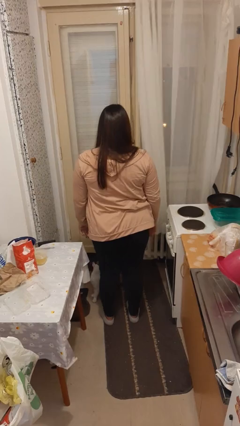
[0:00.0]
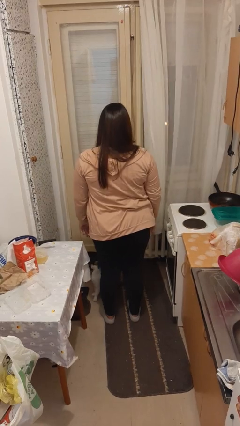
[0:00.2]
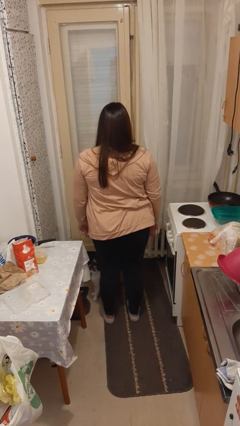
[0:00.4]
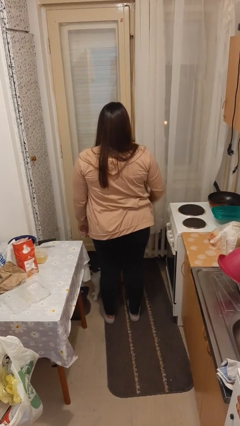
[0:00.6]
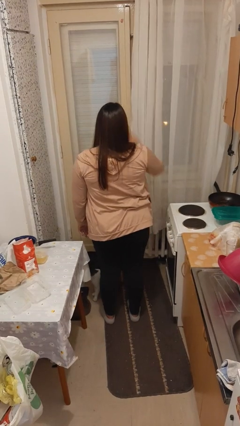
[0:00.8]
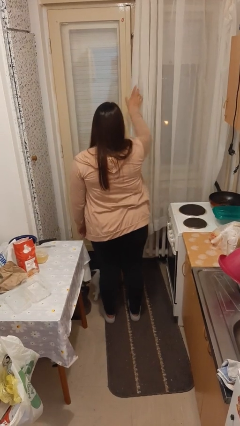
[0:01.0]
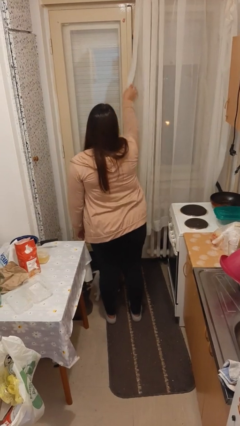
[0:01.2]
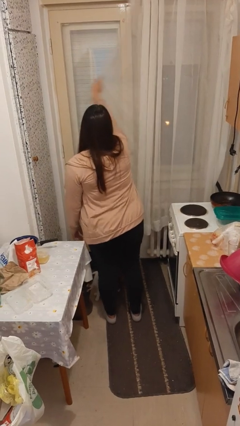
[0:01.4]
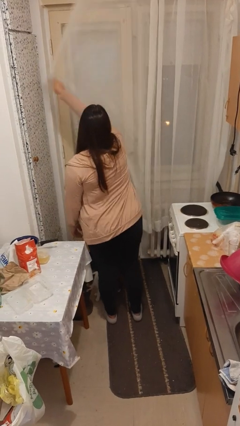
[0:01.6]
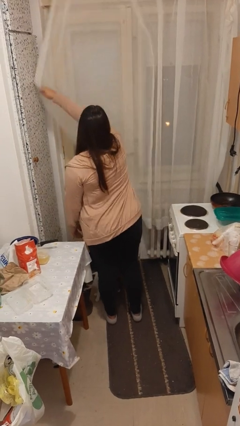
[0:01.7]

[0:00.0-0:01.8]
person closes curtains

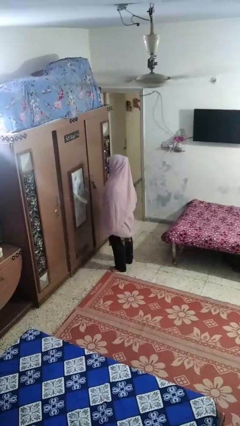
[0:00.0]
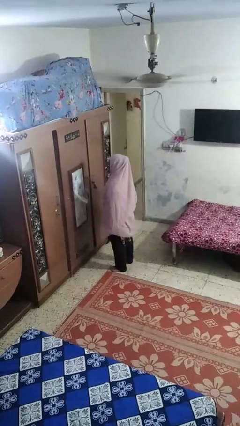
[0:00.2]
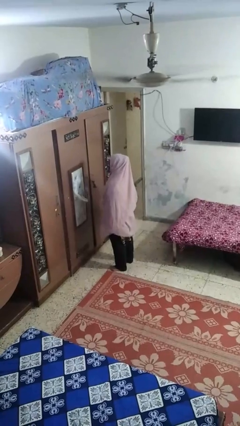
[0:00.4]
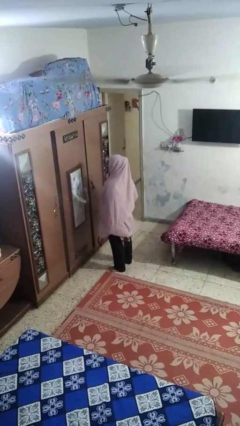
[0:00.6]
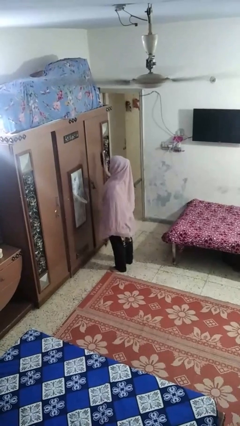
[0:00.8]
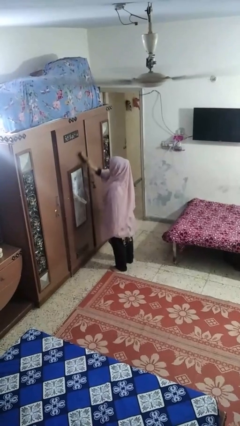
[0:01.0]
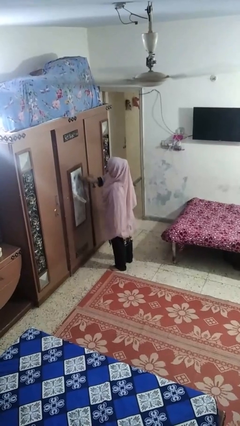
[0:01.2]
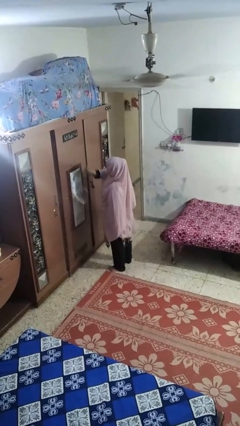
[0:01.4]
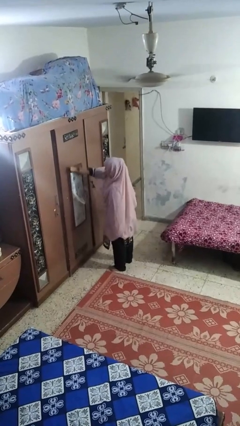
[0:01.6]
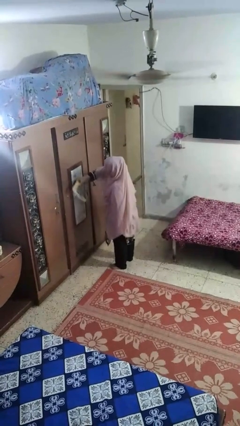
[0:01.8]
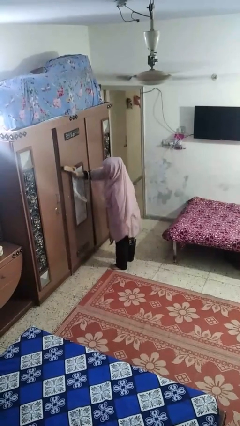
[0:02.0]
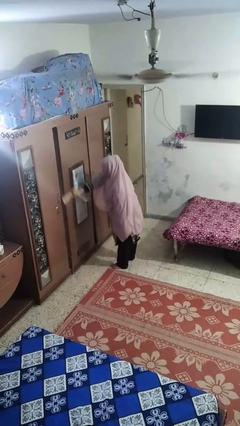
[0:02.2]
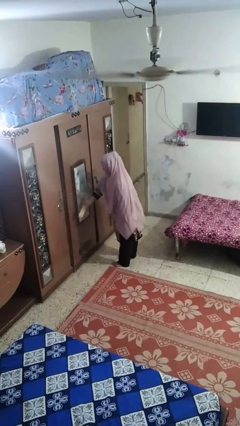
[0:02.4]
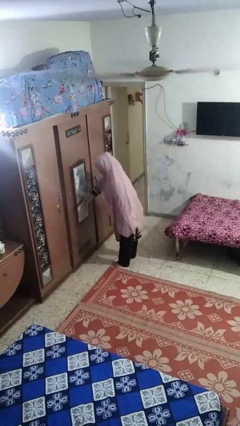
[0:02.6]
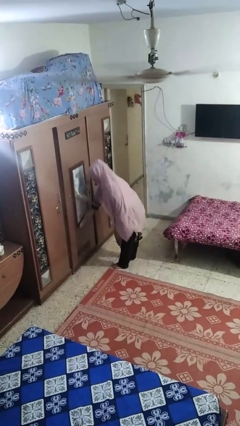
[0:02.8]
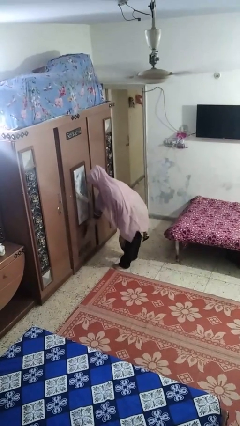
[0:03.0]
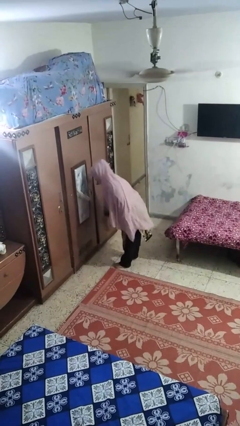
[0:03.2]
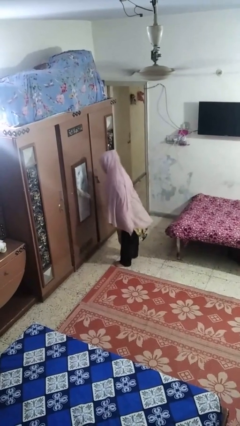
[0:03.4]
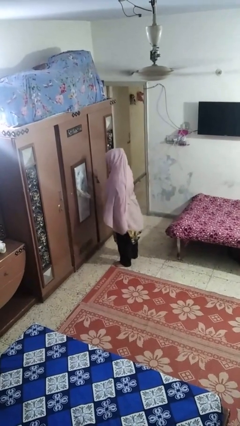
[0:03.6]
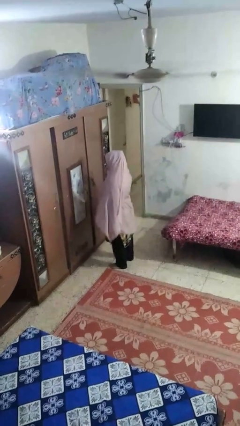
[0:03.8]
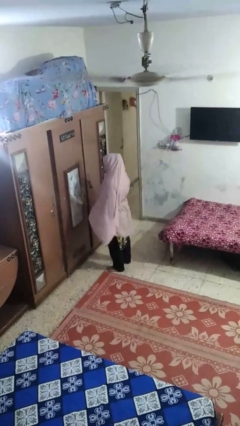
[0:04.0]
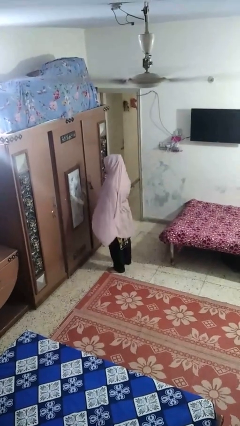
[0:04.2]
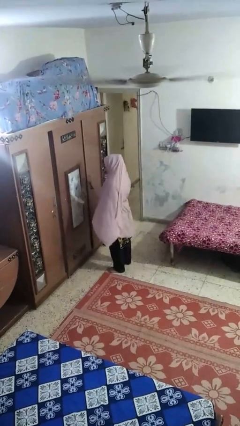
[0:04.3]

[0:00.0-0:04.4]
person dusts furniture

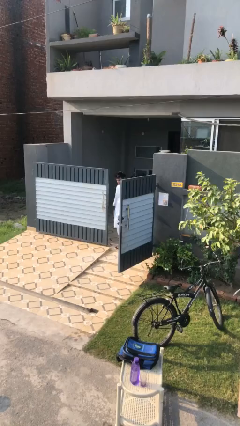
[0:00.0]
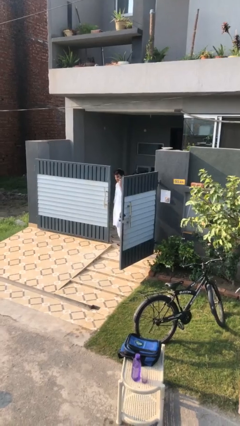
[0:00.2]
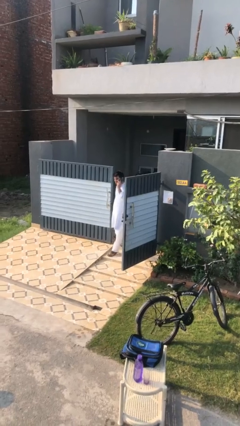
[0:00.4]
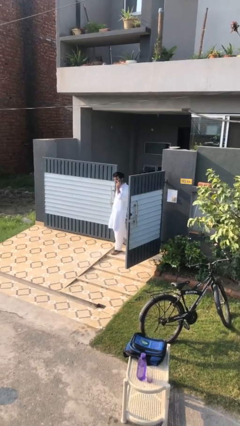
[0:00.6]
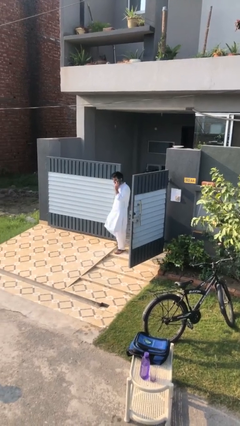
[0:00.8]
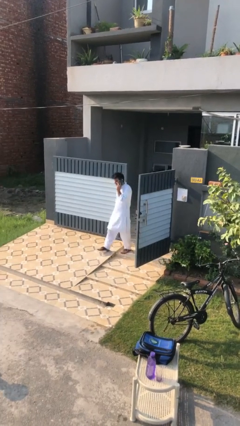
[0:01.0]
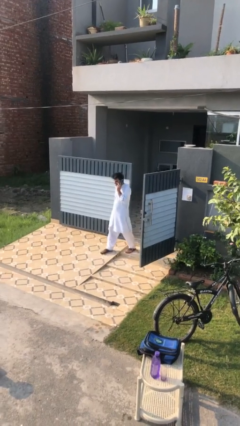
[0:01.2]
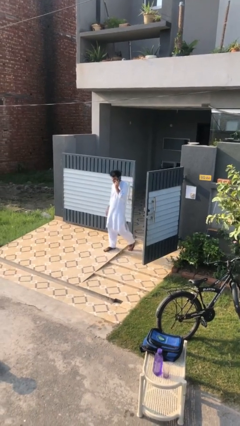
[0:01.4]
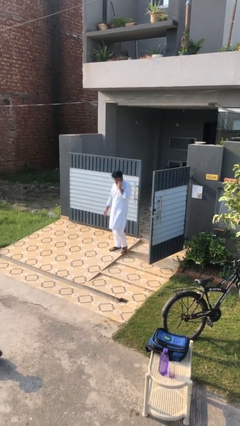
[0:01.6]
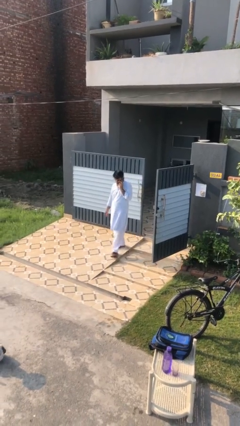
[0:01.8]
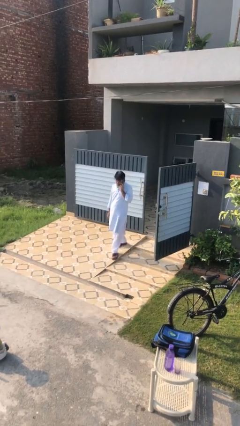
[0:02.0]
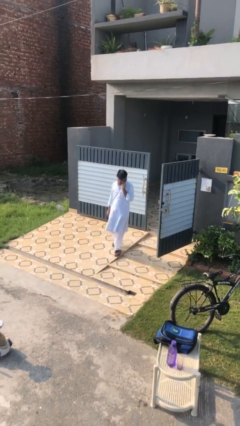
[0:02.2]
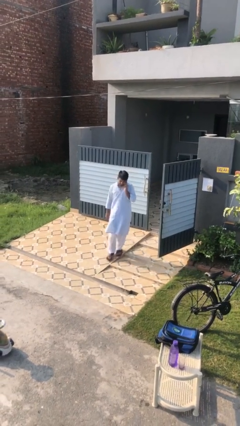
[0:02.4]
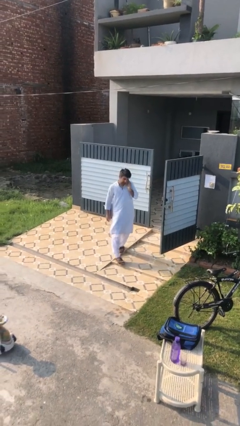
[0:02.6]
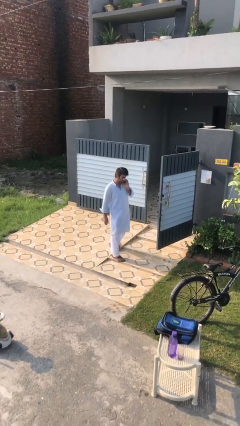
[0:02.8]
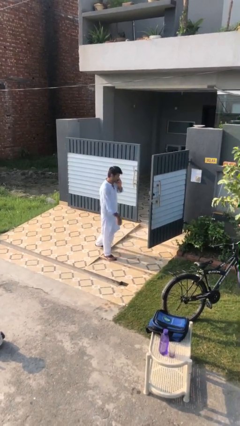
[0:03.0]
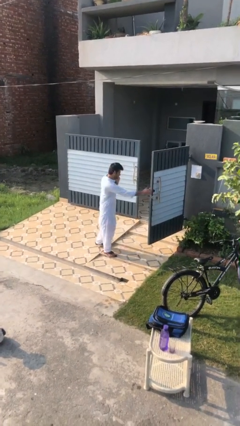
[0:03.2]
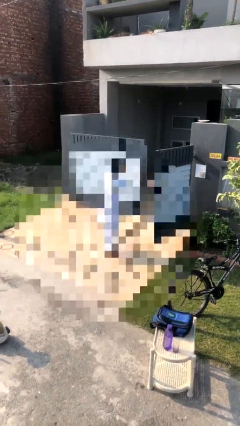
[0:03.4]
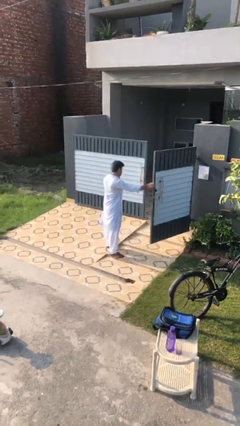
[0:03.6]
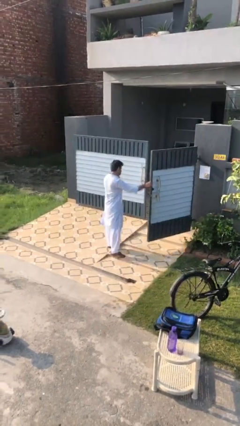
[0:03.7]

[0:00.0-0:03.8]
person enters scene through structure

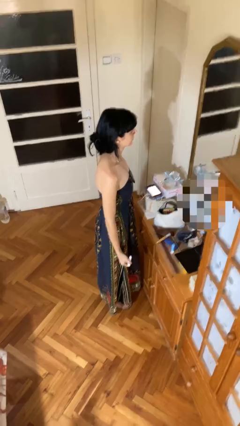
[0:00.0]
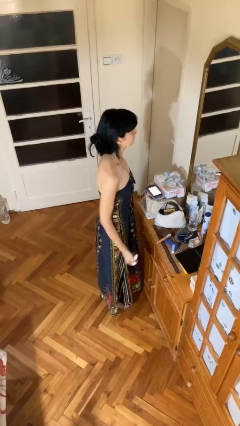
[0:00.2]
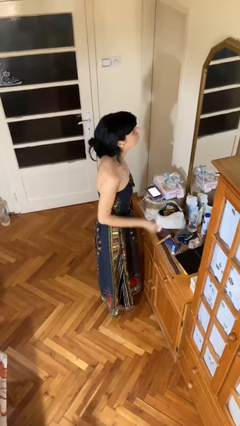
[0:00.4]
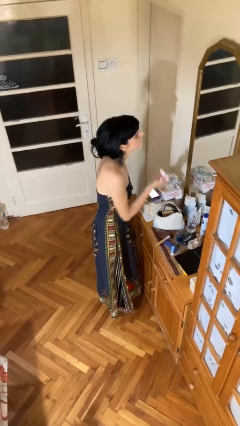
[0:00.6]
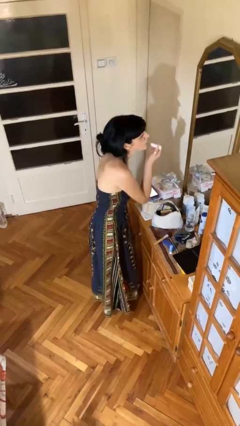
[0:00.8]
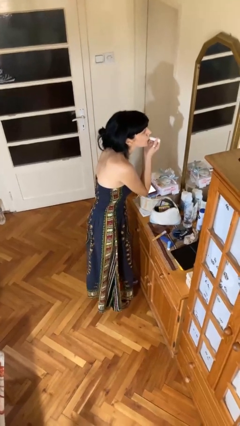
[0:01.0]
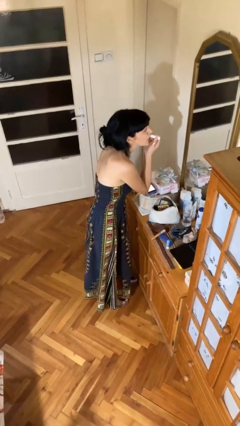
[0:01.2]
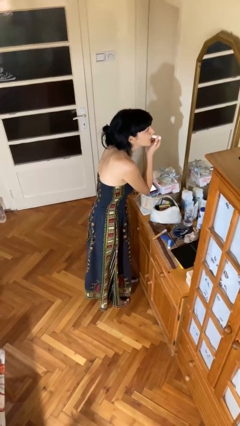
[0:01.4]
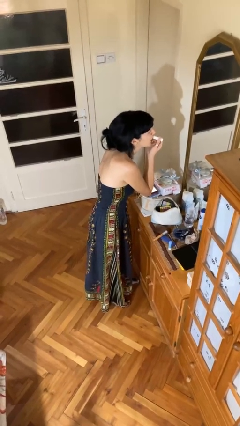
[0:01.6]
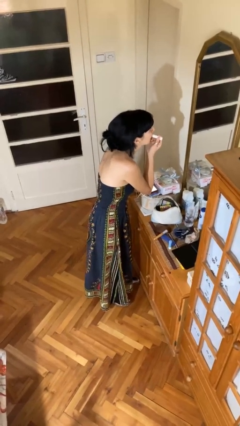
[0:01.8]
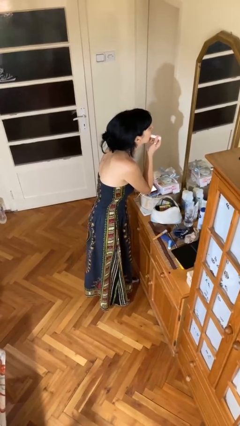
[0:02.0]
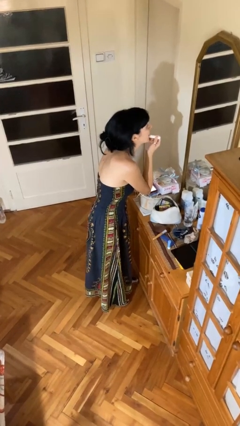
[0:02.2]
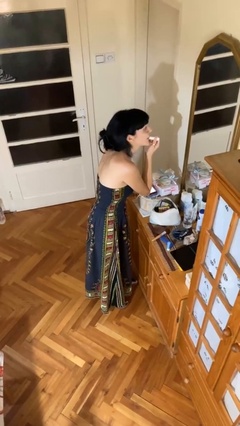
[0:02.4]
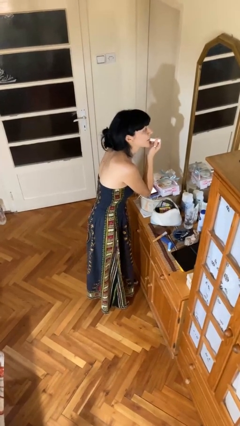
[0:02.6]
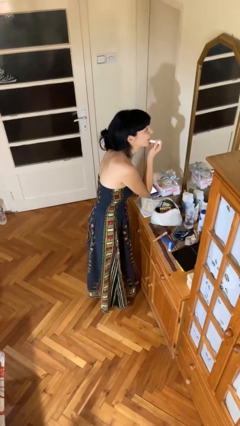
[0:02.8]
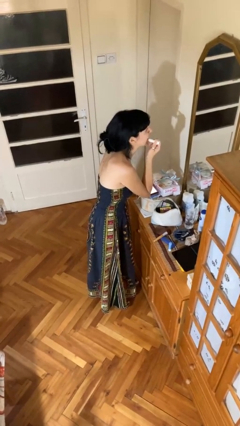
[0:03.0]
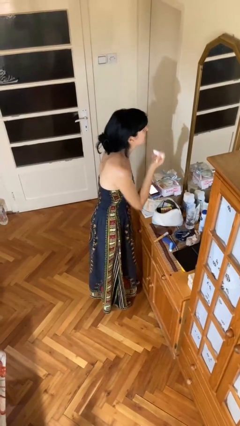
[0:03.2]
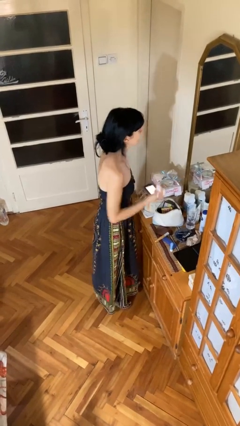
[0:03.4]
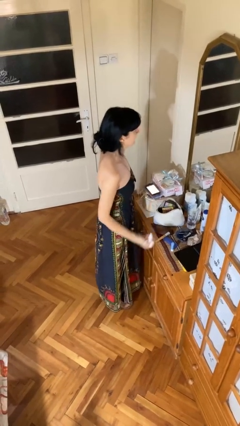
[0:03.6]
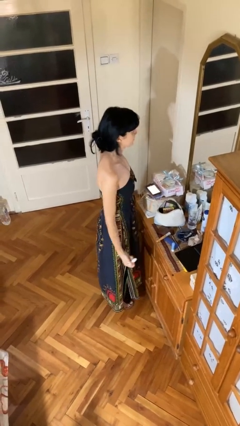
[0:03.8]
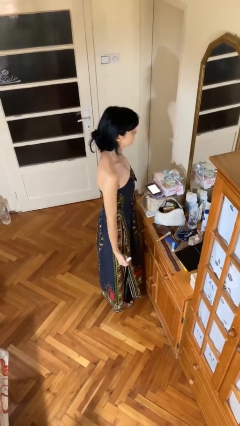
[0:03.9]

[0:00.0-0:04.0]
person applies lip makeup

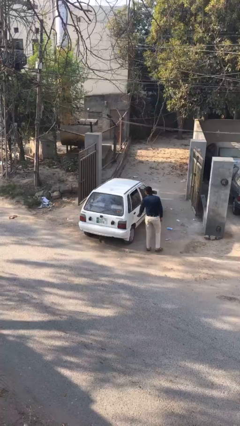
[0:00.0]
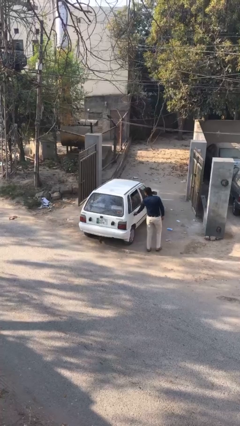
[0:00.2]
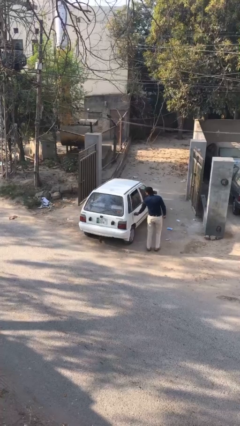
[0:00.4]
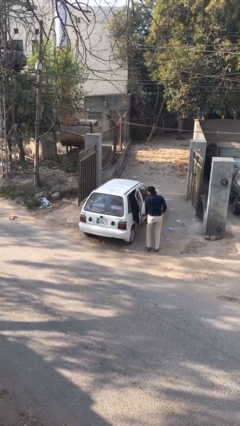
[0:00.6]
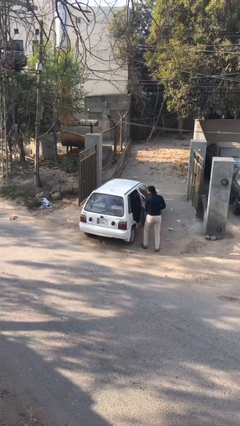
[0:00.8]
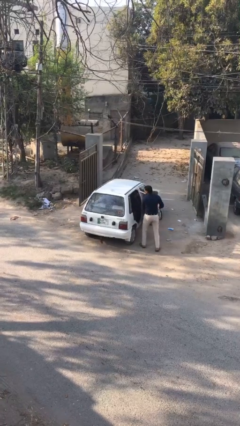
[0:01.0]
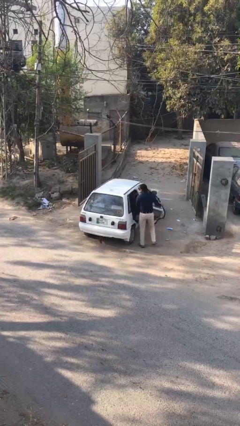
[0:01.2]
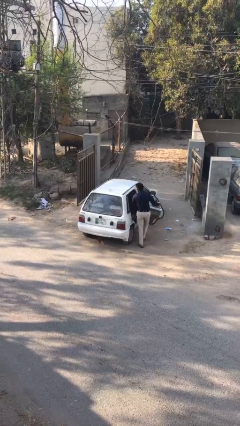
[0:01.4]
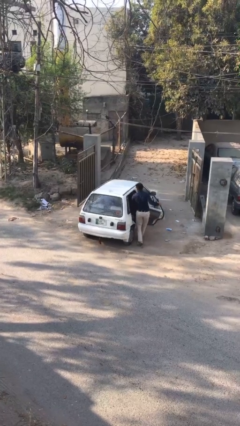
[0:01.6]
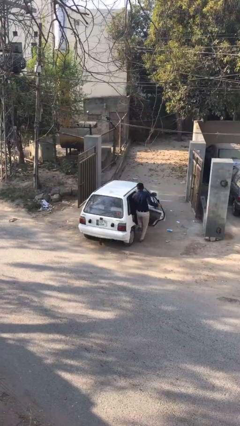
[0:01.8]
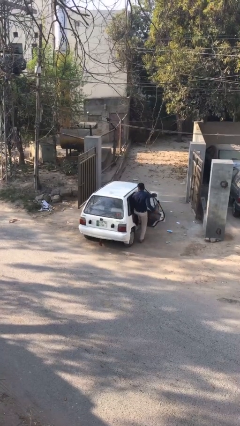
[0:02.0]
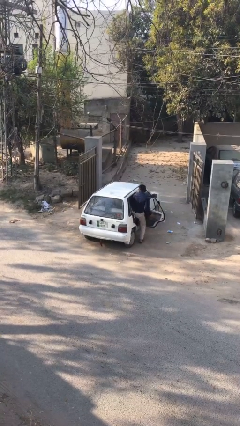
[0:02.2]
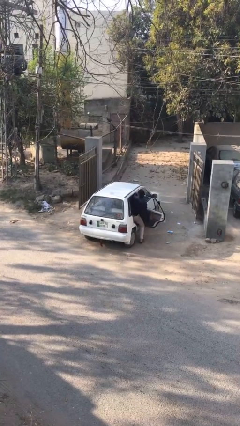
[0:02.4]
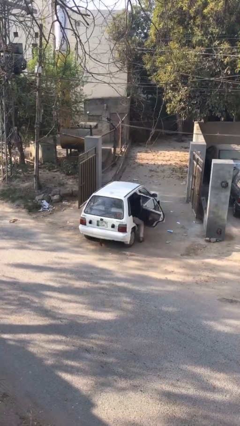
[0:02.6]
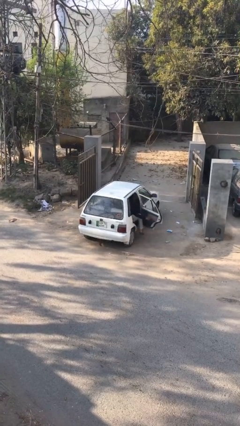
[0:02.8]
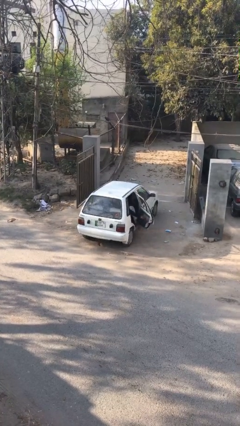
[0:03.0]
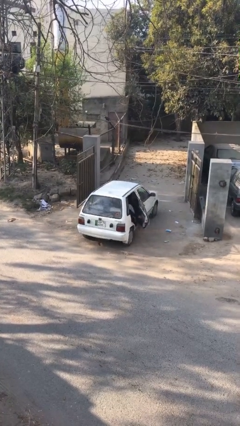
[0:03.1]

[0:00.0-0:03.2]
car picks up person

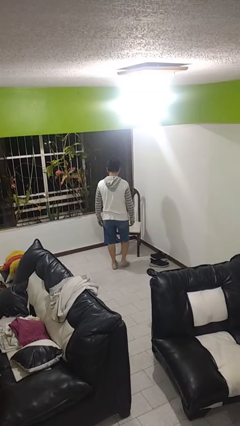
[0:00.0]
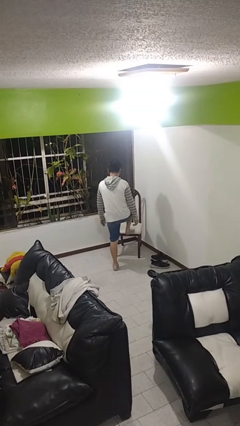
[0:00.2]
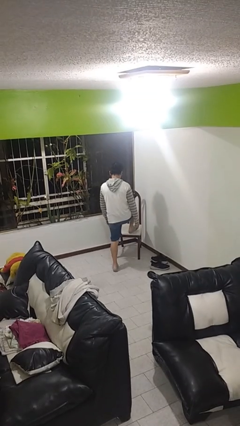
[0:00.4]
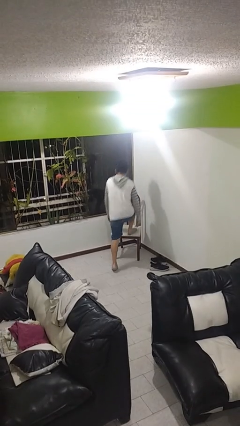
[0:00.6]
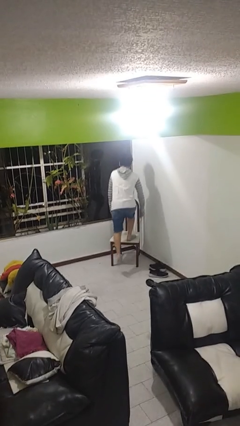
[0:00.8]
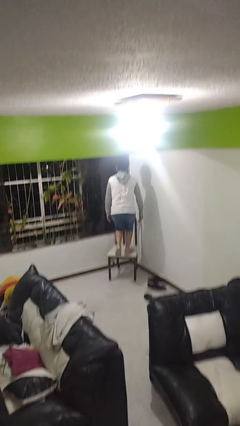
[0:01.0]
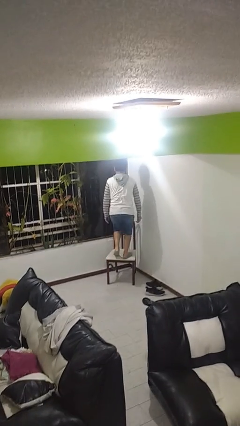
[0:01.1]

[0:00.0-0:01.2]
person climbs on chair
